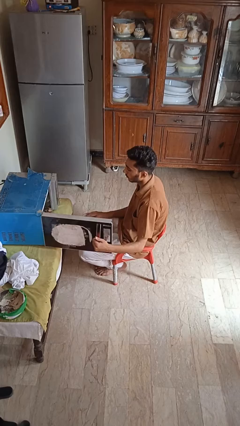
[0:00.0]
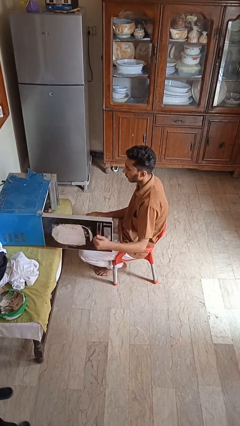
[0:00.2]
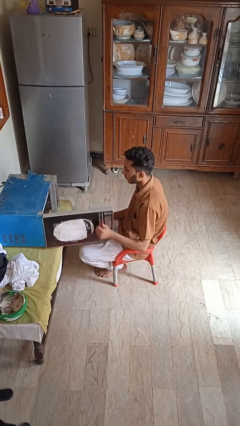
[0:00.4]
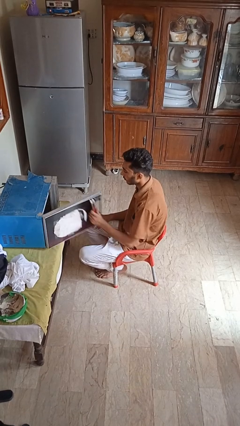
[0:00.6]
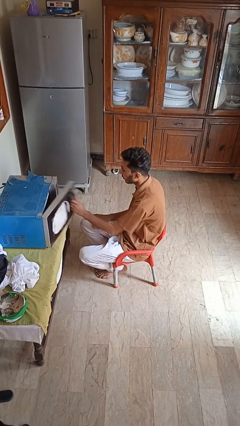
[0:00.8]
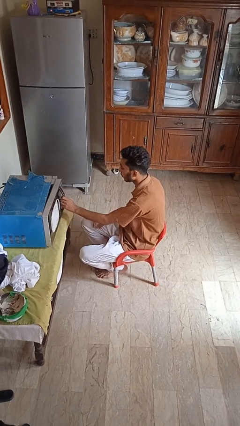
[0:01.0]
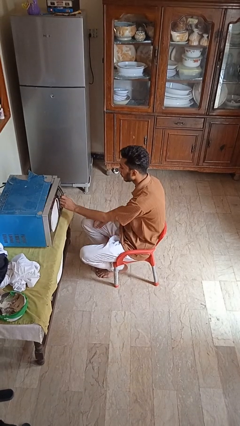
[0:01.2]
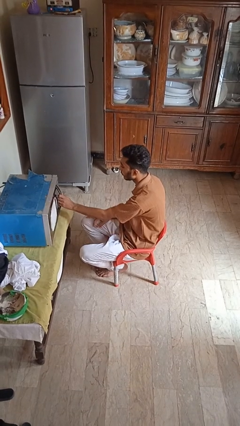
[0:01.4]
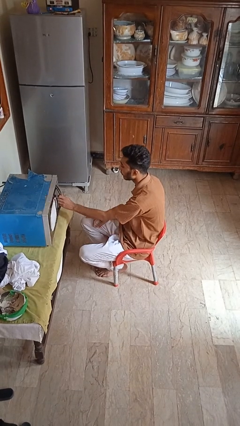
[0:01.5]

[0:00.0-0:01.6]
person closes microwave

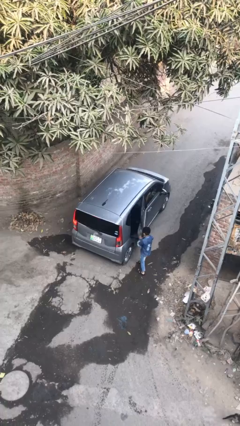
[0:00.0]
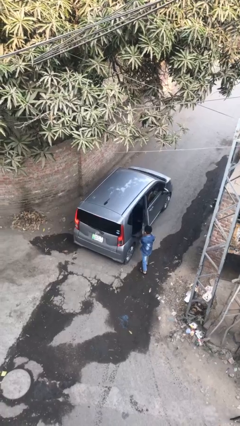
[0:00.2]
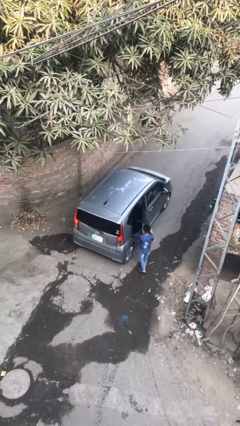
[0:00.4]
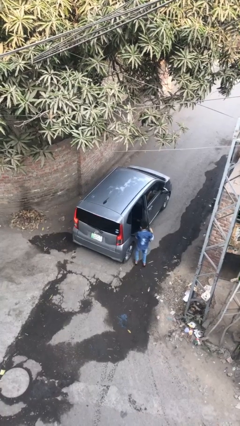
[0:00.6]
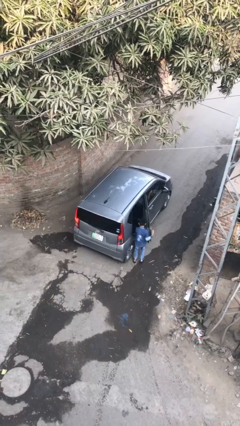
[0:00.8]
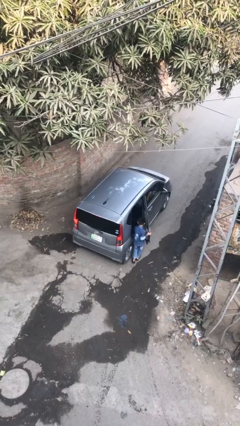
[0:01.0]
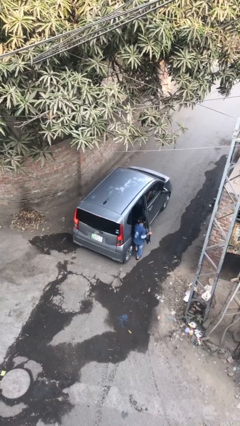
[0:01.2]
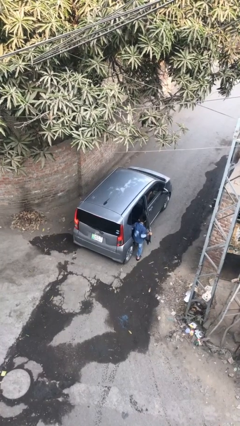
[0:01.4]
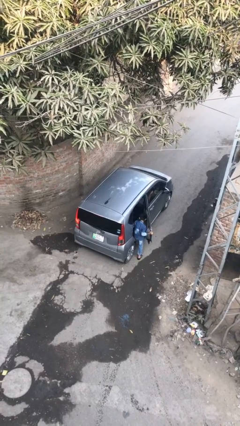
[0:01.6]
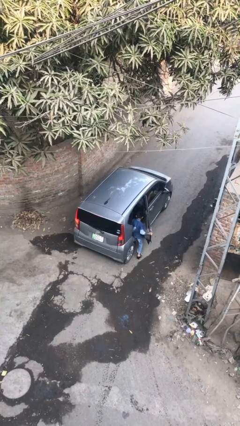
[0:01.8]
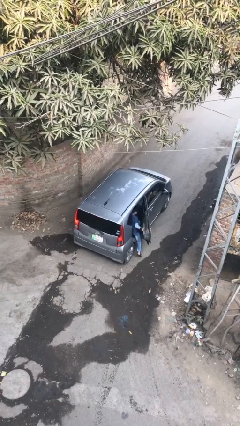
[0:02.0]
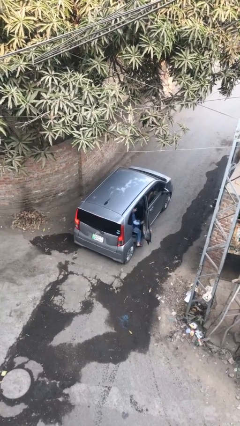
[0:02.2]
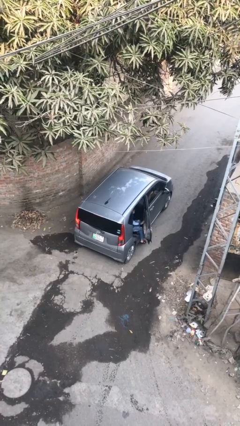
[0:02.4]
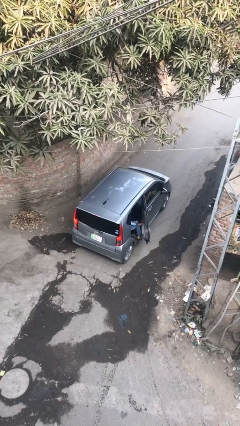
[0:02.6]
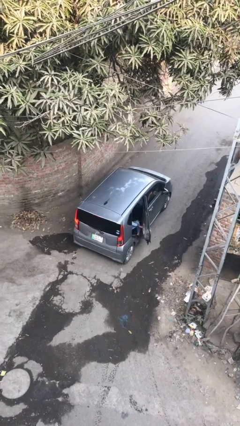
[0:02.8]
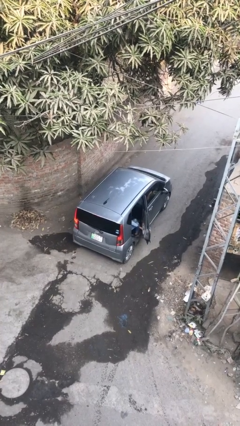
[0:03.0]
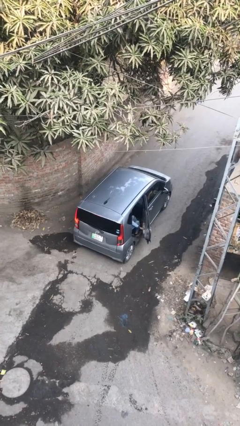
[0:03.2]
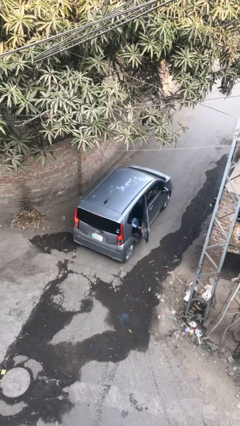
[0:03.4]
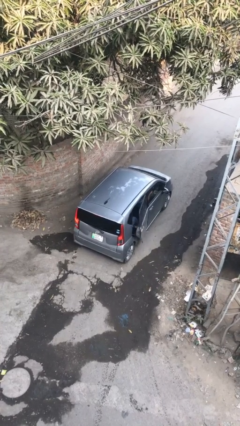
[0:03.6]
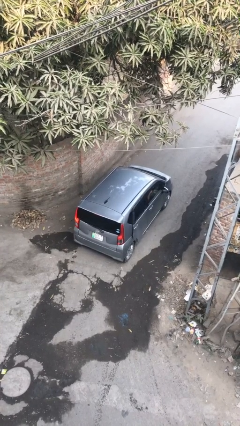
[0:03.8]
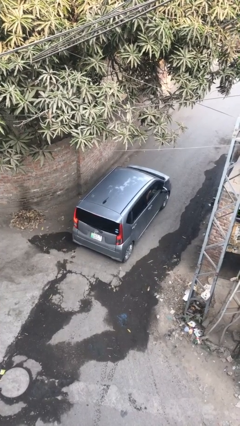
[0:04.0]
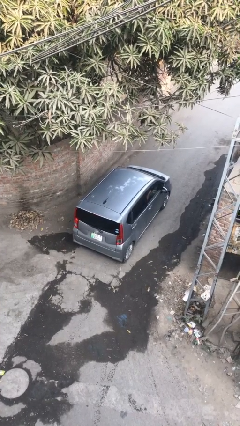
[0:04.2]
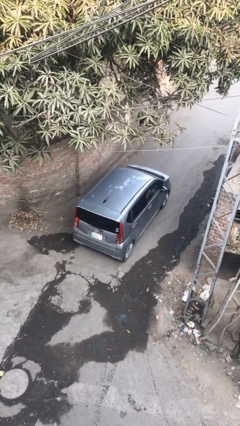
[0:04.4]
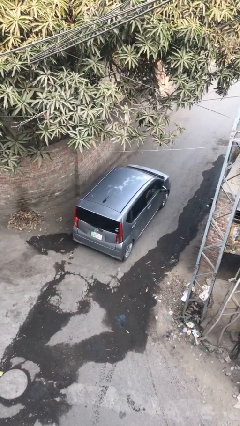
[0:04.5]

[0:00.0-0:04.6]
car picks up person

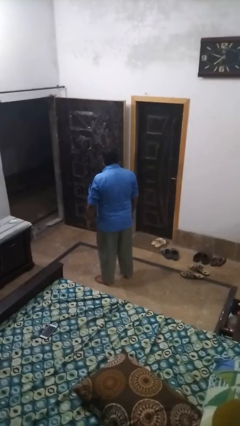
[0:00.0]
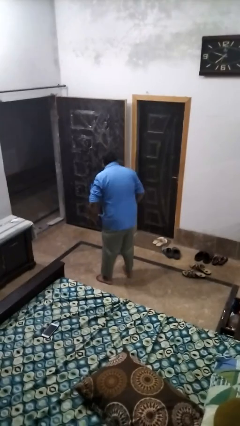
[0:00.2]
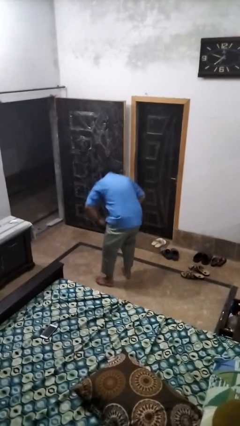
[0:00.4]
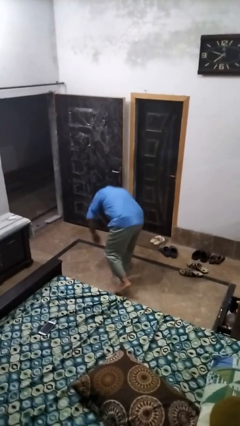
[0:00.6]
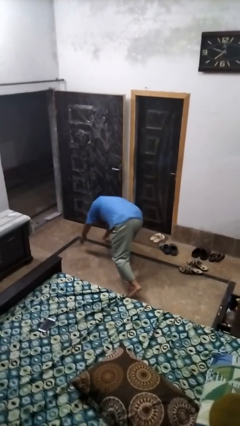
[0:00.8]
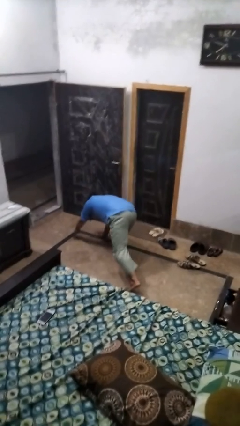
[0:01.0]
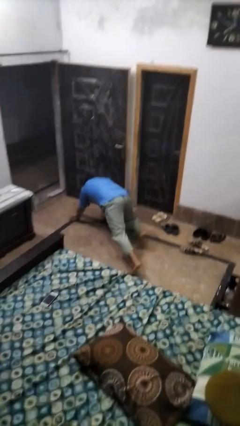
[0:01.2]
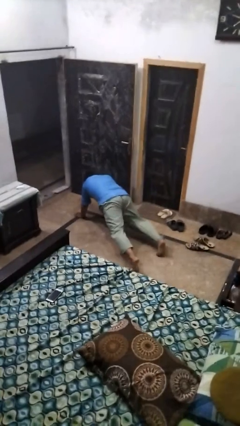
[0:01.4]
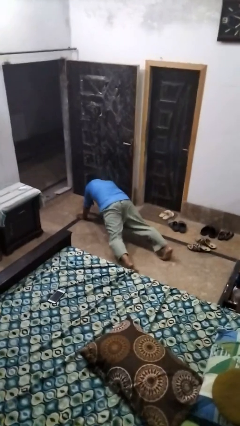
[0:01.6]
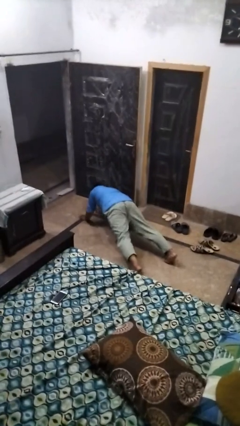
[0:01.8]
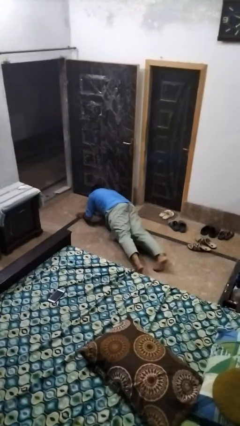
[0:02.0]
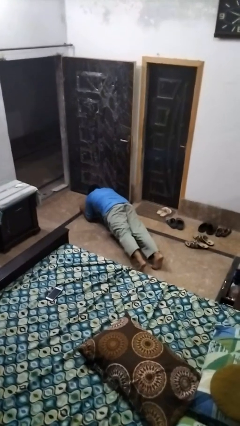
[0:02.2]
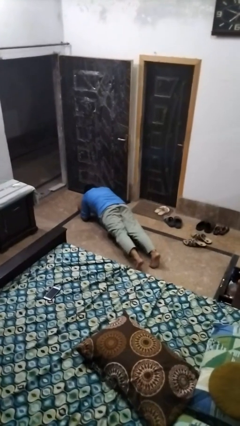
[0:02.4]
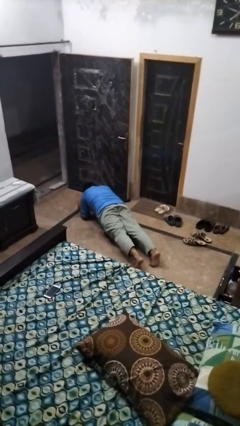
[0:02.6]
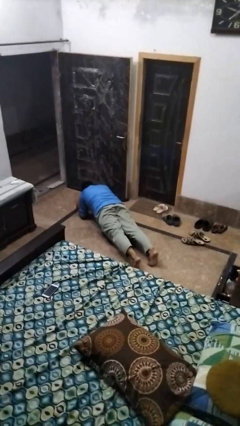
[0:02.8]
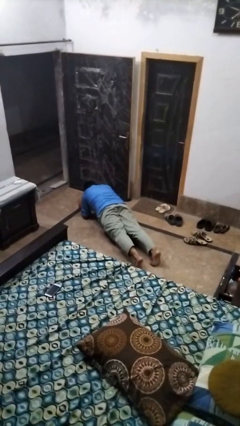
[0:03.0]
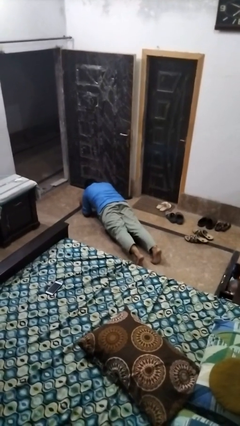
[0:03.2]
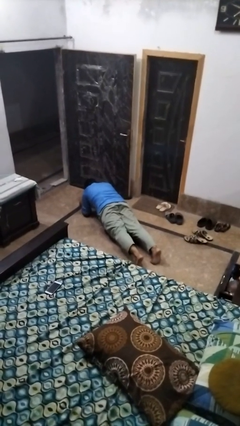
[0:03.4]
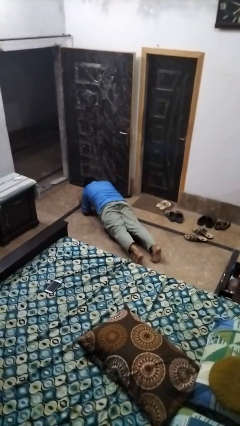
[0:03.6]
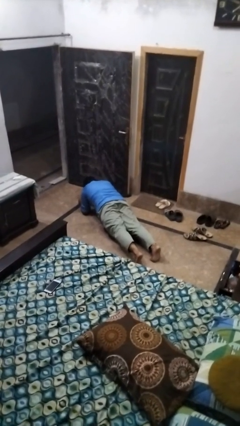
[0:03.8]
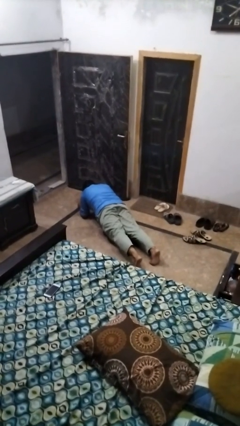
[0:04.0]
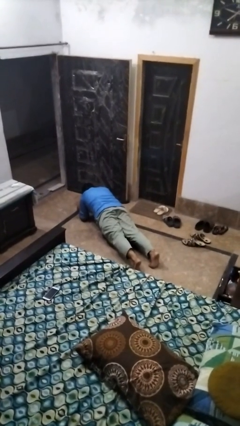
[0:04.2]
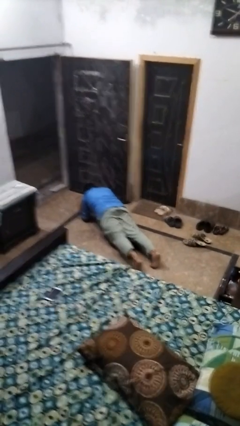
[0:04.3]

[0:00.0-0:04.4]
person exercises with plank

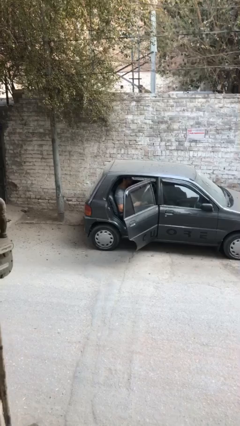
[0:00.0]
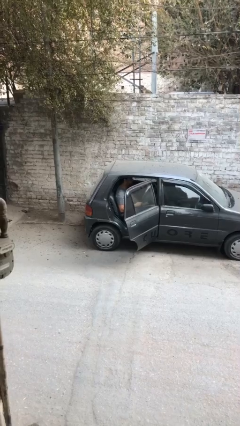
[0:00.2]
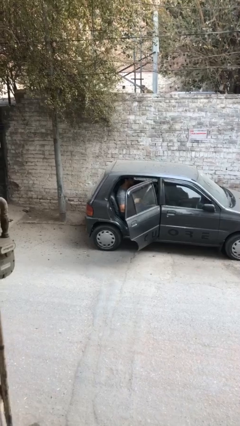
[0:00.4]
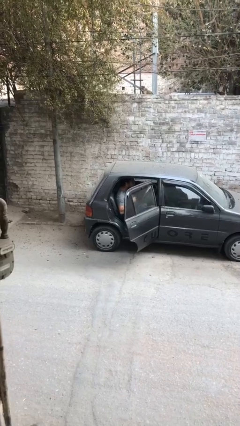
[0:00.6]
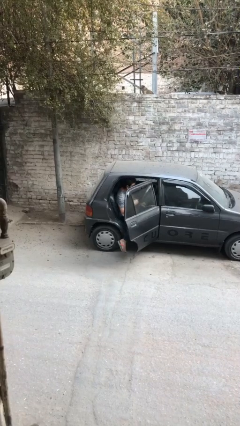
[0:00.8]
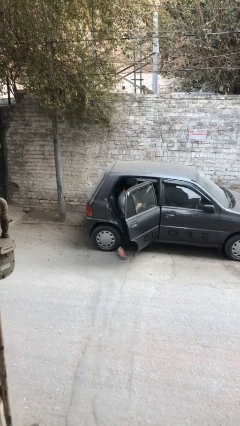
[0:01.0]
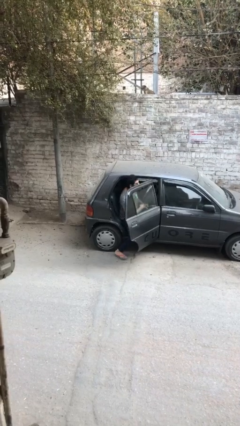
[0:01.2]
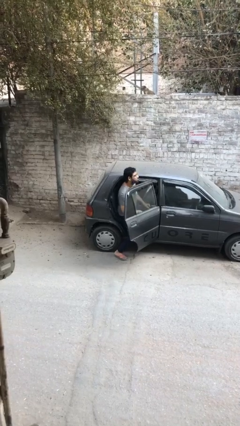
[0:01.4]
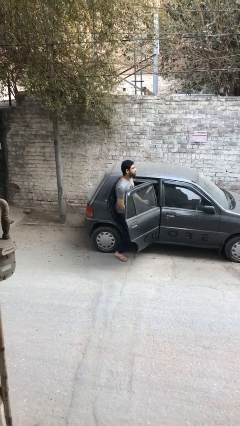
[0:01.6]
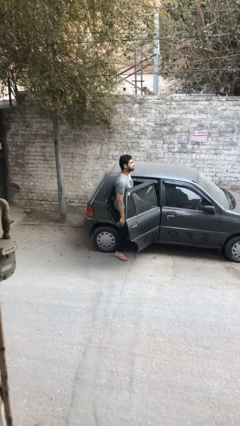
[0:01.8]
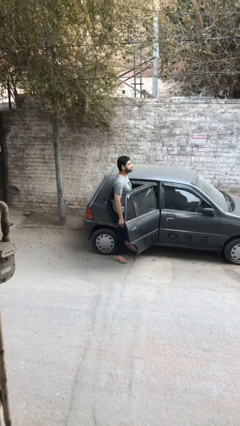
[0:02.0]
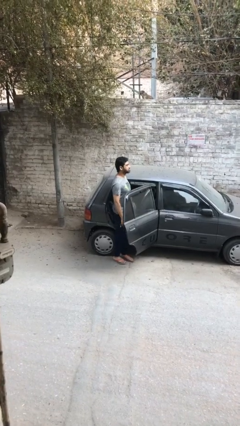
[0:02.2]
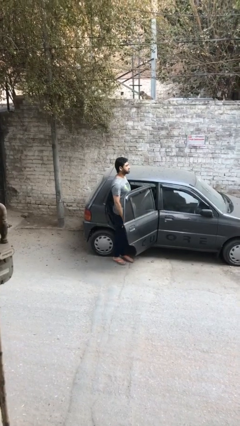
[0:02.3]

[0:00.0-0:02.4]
person exits car

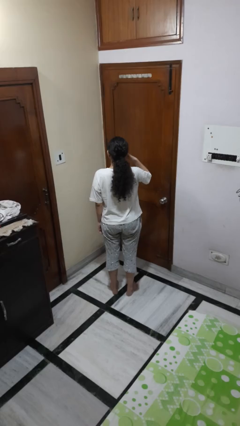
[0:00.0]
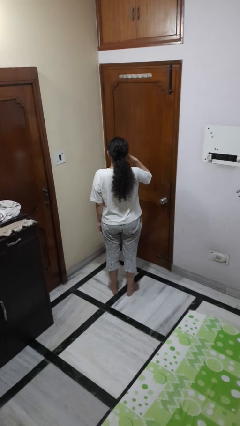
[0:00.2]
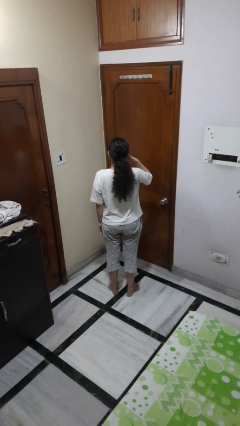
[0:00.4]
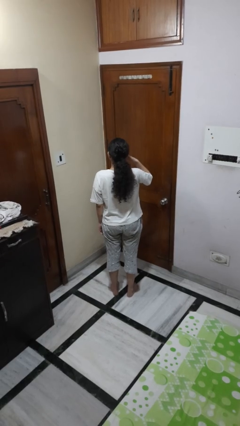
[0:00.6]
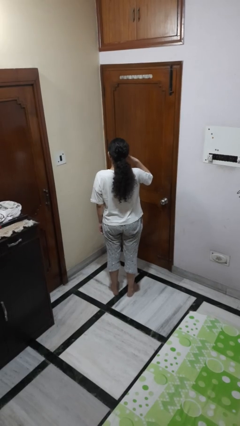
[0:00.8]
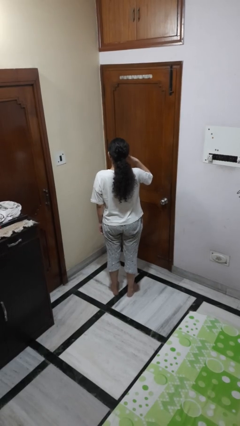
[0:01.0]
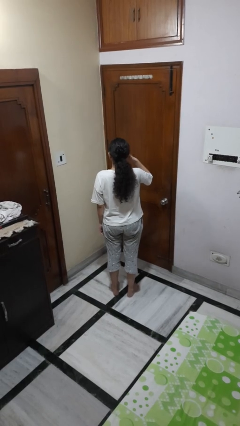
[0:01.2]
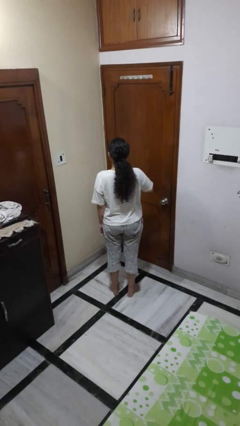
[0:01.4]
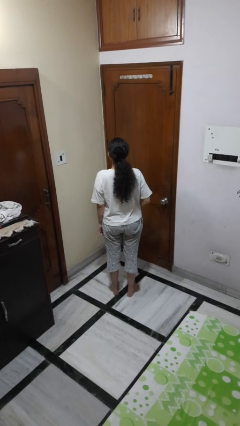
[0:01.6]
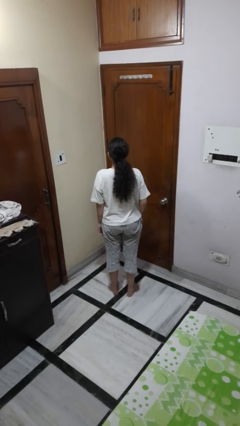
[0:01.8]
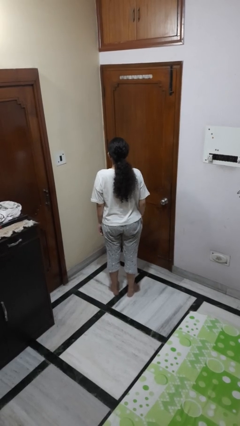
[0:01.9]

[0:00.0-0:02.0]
person gestures call me

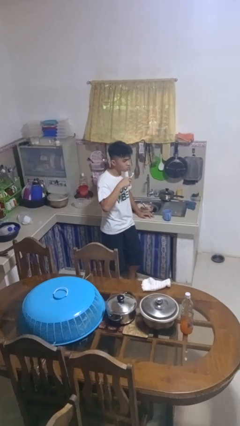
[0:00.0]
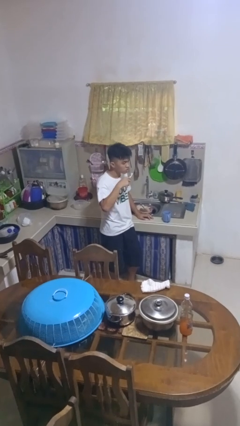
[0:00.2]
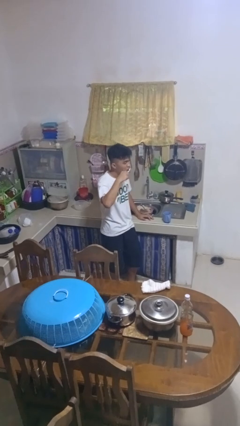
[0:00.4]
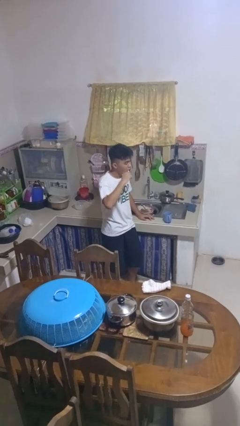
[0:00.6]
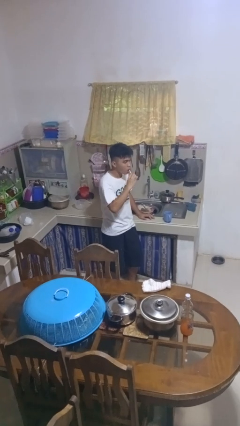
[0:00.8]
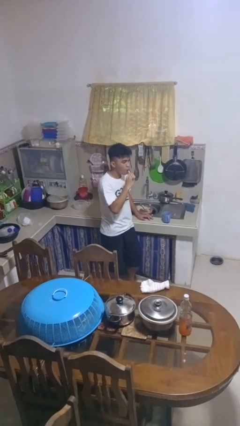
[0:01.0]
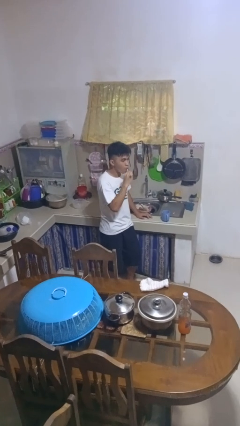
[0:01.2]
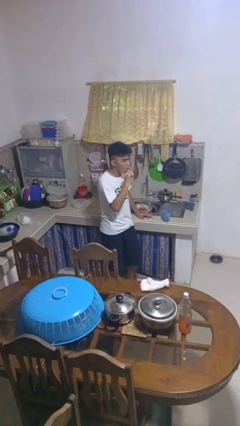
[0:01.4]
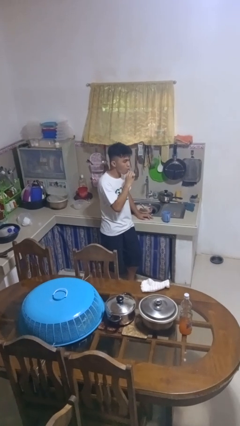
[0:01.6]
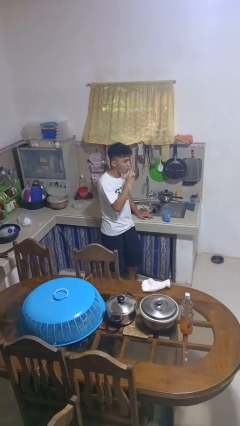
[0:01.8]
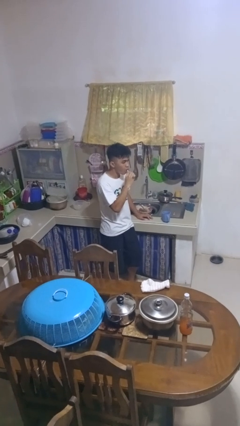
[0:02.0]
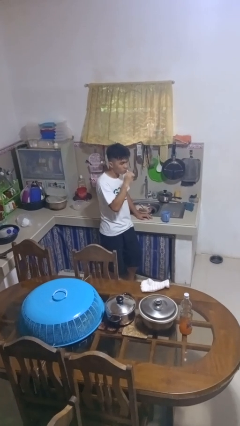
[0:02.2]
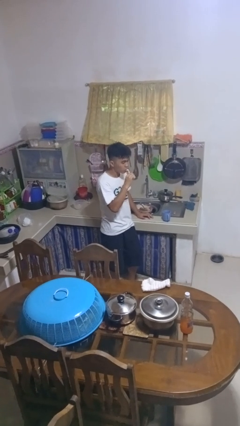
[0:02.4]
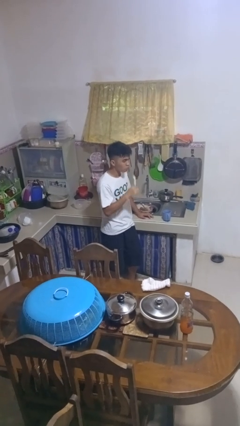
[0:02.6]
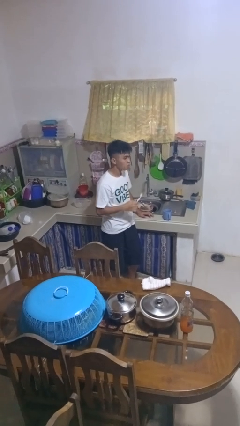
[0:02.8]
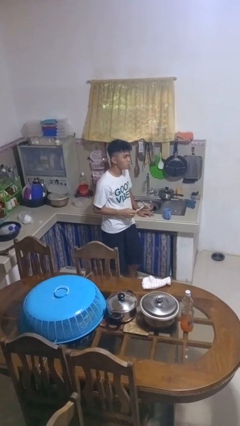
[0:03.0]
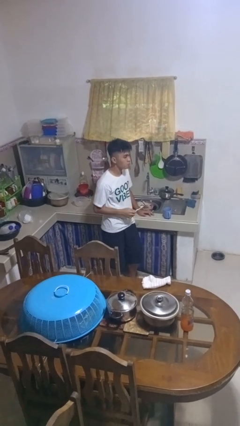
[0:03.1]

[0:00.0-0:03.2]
person brushes teeth
